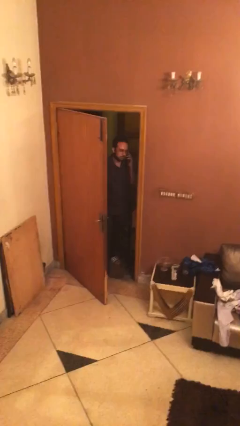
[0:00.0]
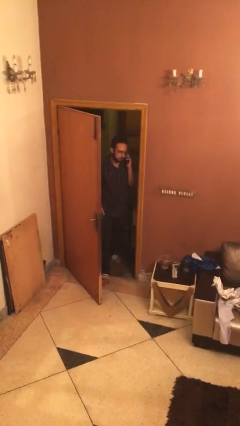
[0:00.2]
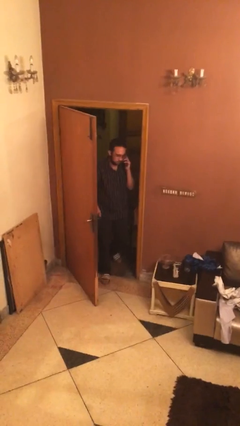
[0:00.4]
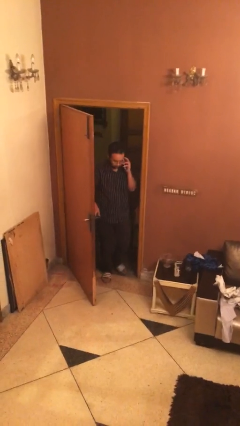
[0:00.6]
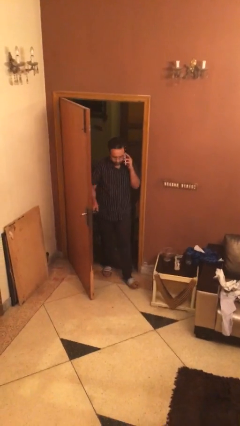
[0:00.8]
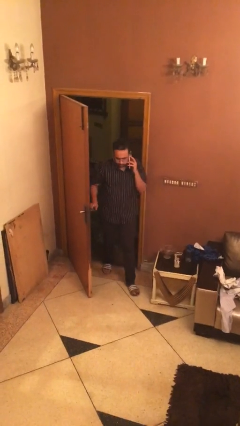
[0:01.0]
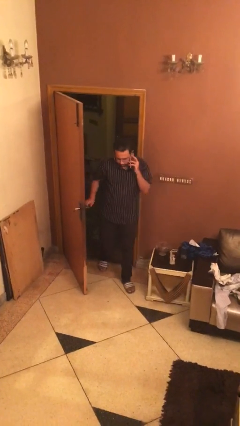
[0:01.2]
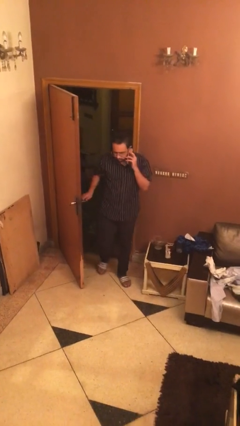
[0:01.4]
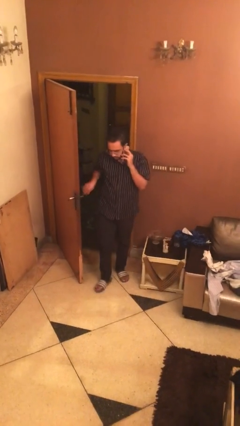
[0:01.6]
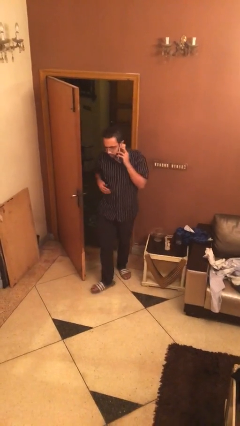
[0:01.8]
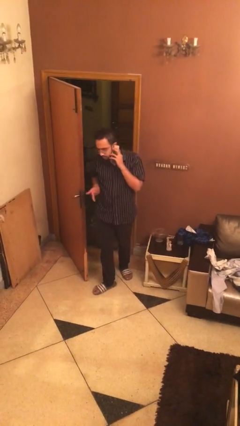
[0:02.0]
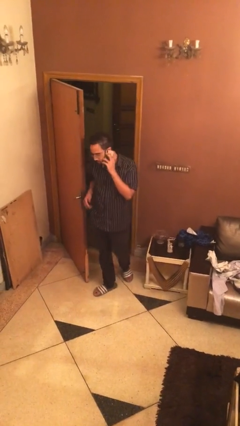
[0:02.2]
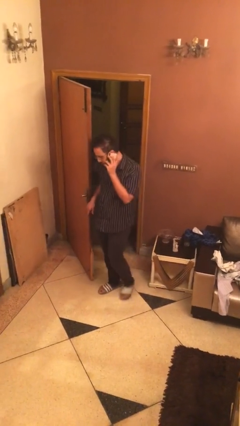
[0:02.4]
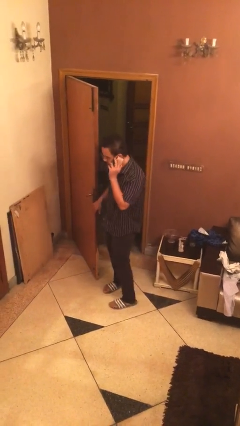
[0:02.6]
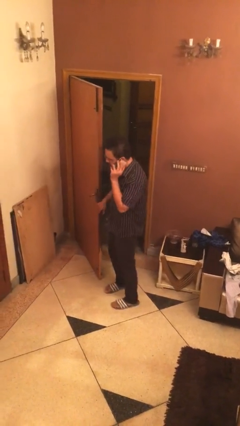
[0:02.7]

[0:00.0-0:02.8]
person enters scene through structure

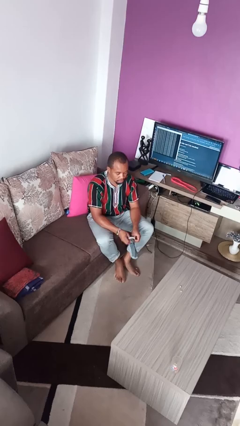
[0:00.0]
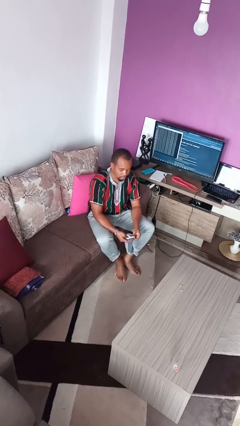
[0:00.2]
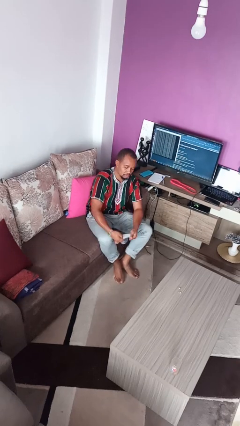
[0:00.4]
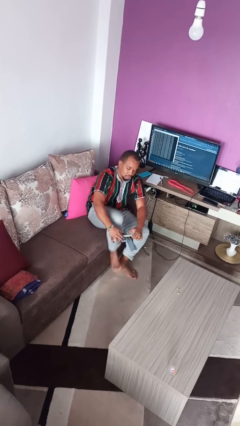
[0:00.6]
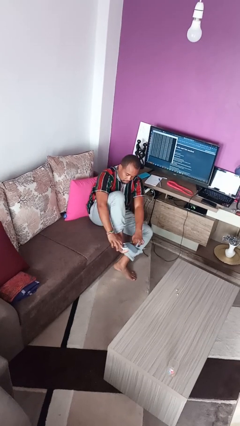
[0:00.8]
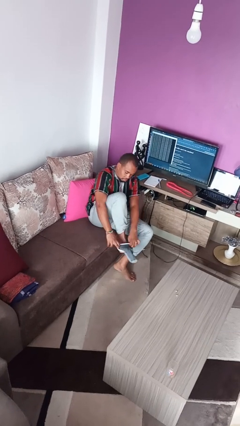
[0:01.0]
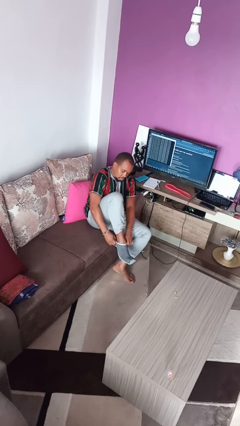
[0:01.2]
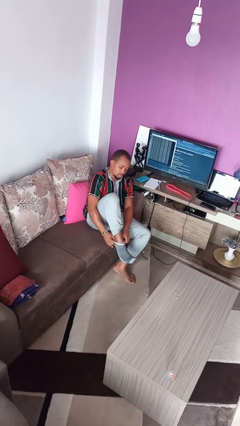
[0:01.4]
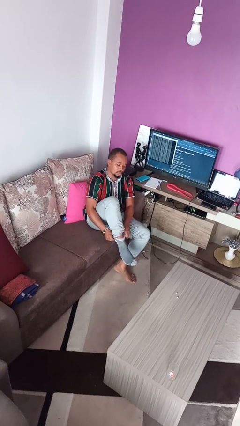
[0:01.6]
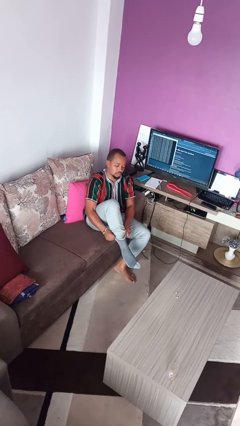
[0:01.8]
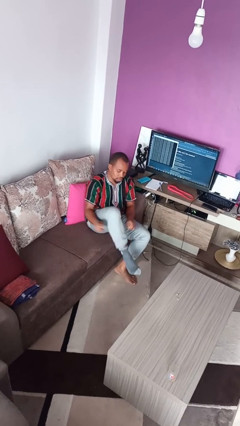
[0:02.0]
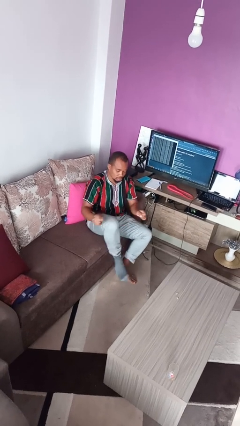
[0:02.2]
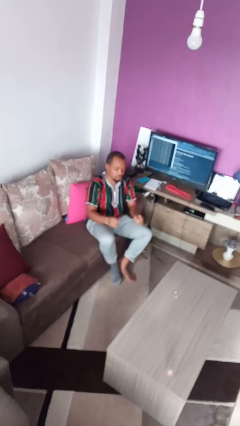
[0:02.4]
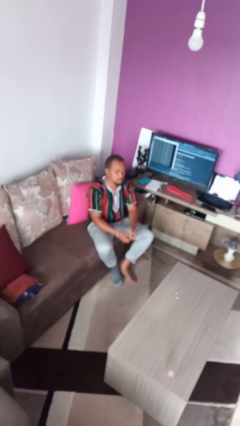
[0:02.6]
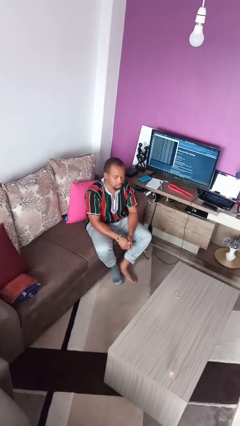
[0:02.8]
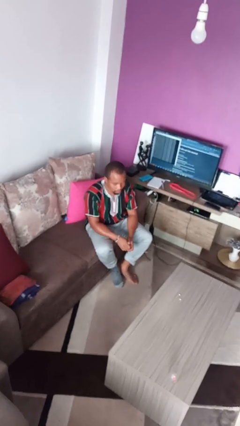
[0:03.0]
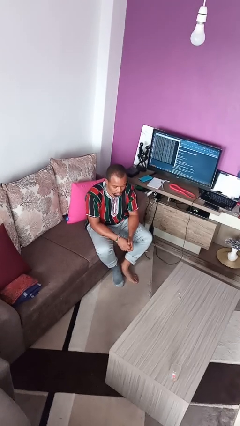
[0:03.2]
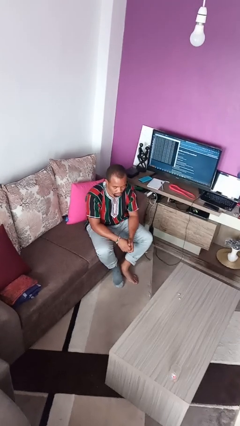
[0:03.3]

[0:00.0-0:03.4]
person puts on socks

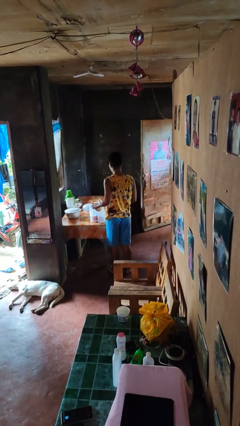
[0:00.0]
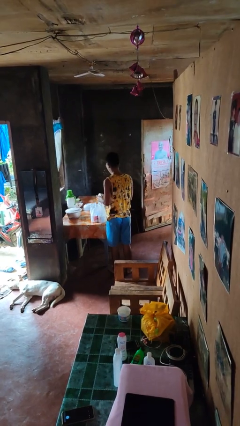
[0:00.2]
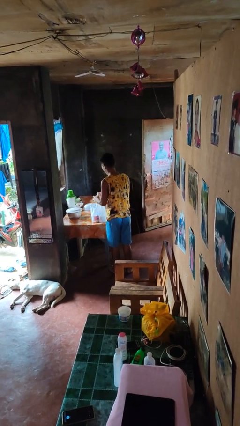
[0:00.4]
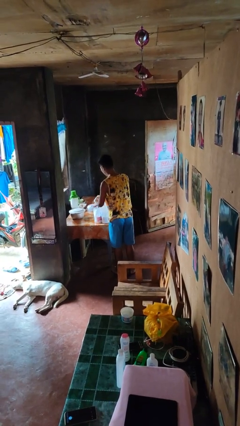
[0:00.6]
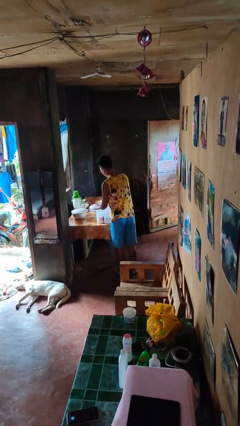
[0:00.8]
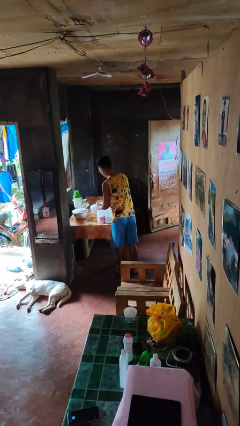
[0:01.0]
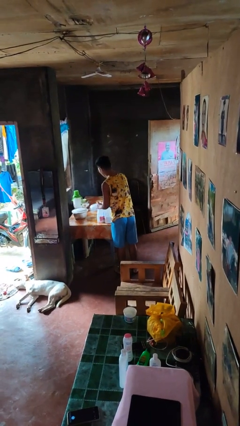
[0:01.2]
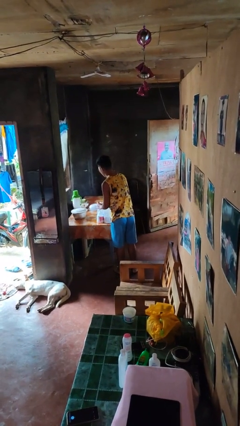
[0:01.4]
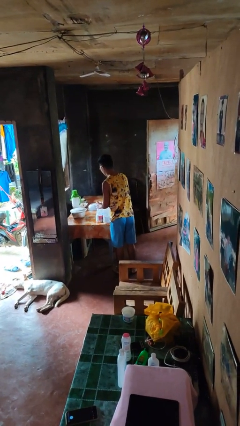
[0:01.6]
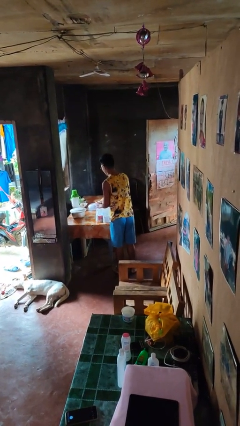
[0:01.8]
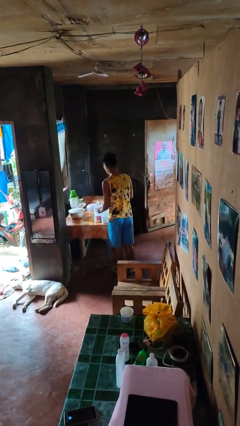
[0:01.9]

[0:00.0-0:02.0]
person puts object into bag

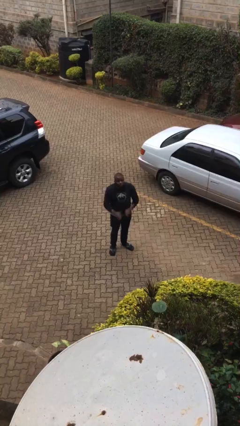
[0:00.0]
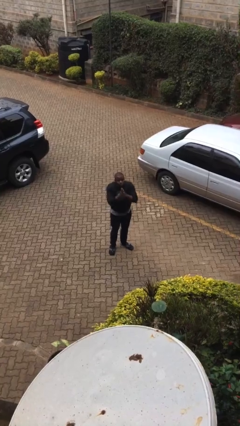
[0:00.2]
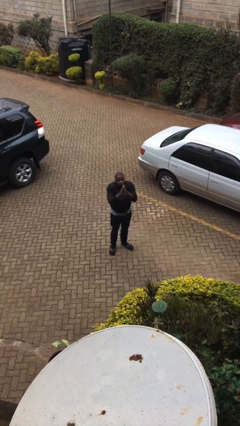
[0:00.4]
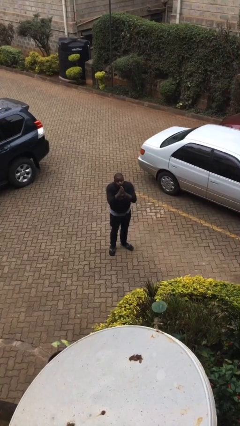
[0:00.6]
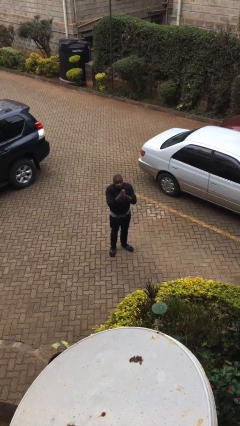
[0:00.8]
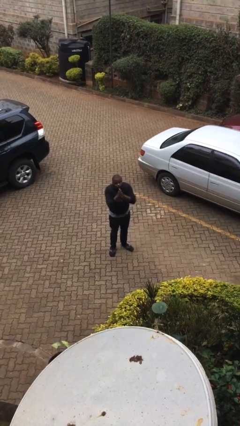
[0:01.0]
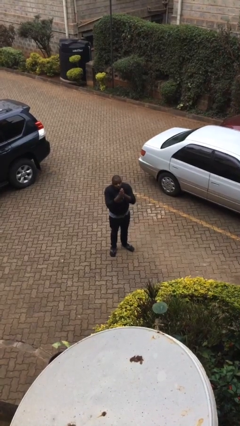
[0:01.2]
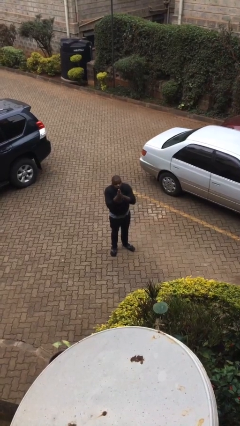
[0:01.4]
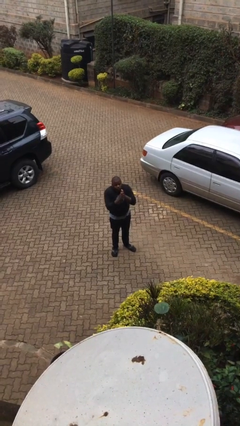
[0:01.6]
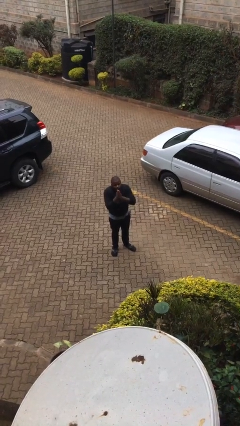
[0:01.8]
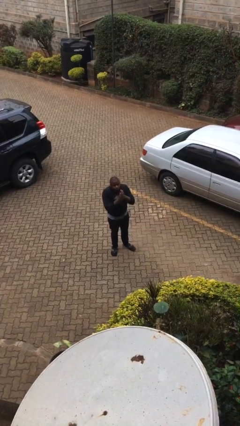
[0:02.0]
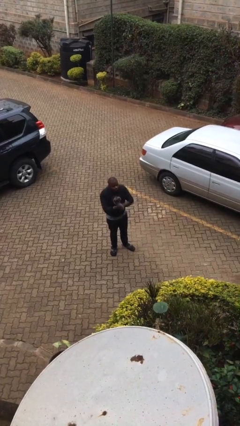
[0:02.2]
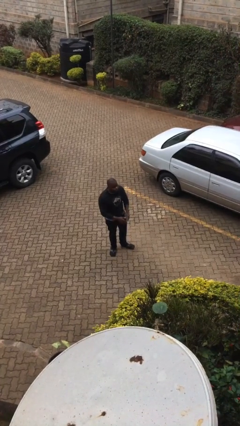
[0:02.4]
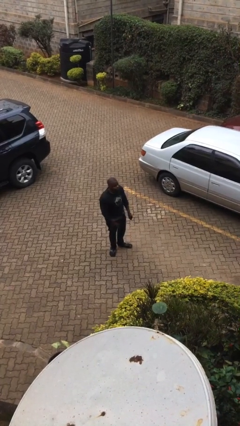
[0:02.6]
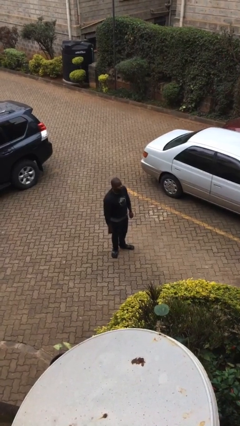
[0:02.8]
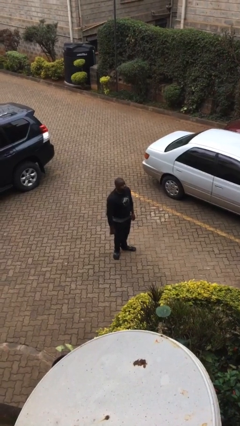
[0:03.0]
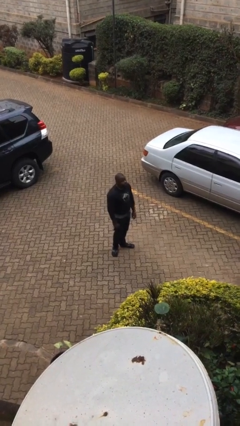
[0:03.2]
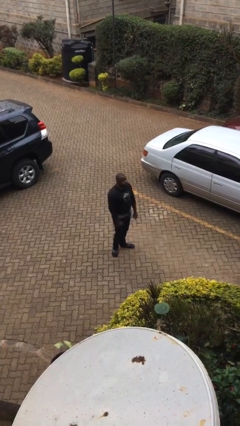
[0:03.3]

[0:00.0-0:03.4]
person blows into hands

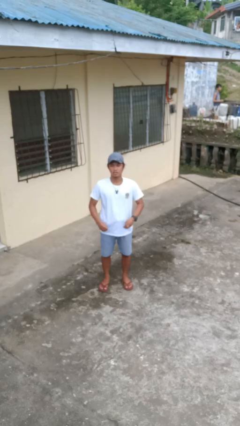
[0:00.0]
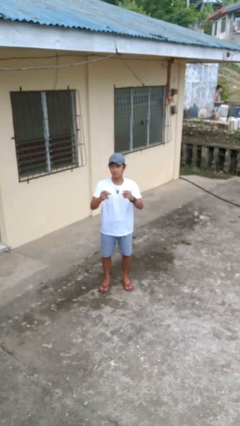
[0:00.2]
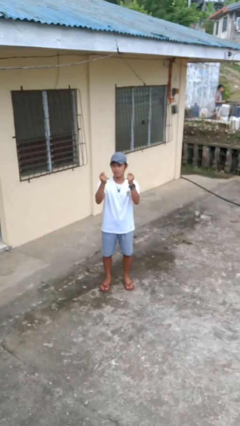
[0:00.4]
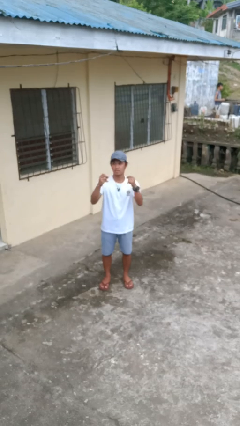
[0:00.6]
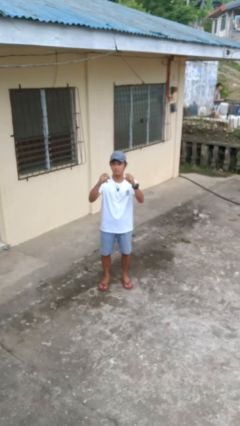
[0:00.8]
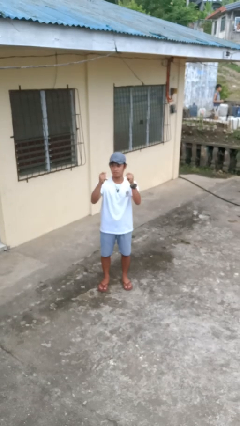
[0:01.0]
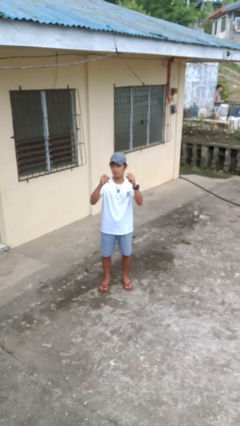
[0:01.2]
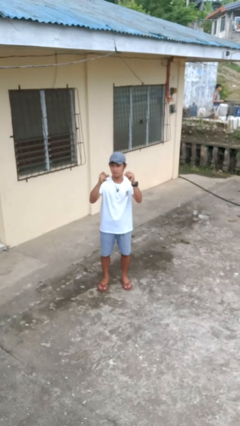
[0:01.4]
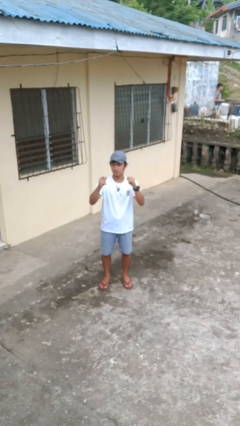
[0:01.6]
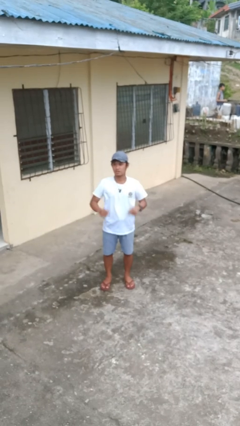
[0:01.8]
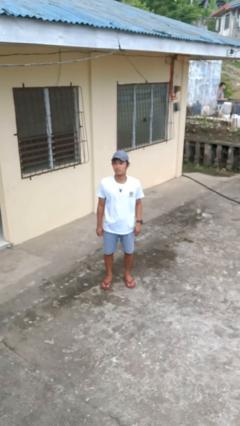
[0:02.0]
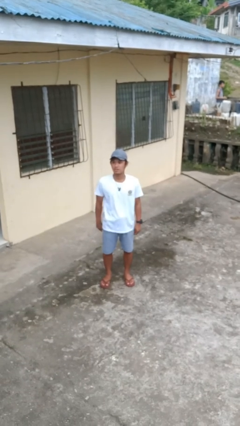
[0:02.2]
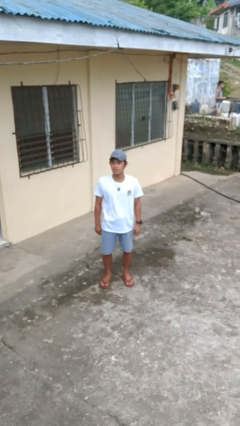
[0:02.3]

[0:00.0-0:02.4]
person snaps fingers

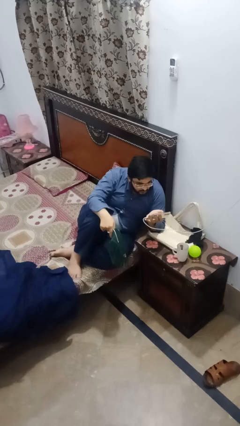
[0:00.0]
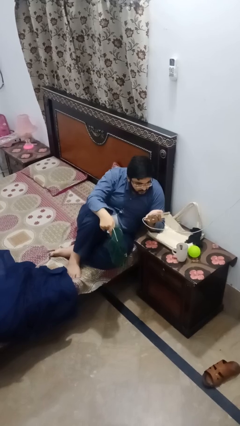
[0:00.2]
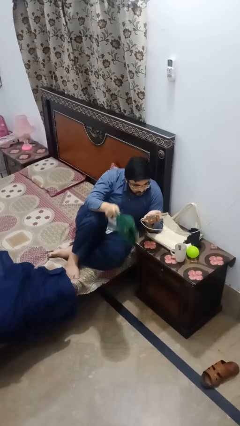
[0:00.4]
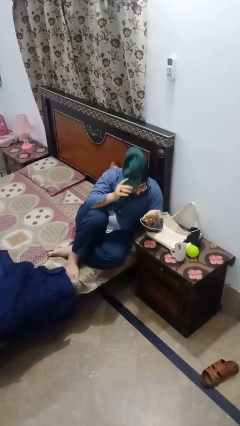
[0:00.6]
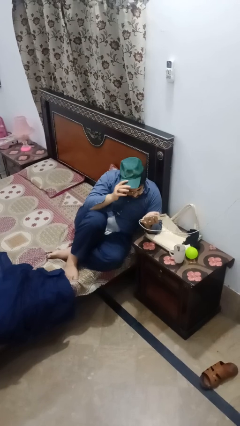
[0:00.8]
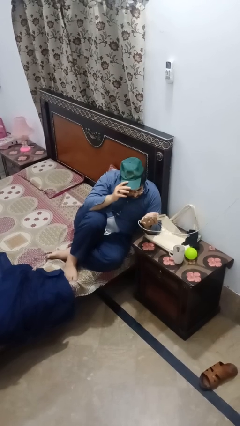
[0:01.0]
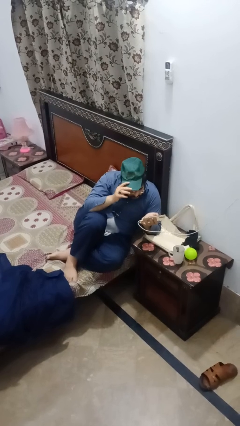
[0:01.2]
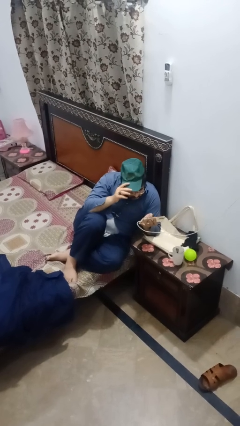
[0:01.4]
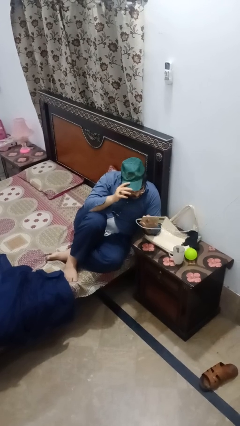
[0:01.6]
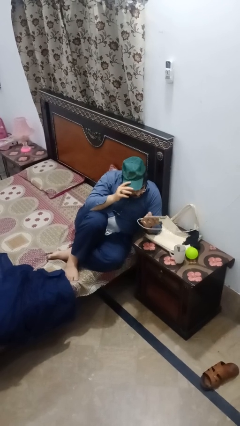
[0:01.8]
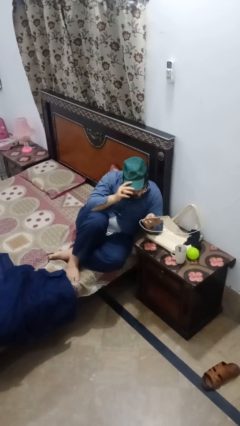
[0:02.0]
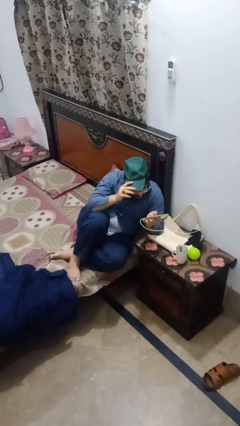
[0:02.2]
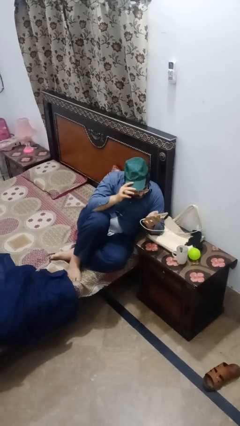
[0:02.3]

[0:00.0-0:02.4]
person puts on hat

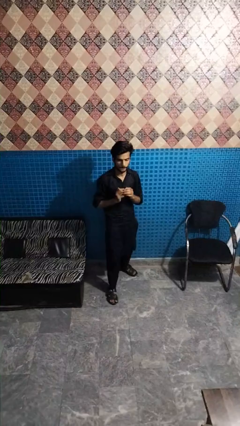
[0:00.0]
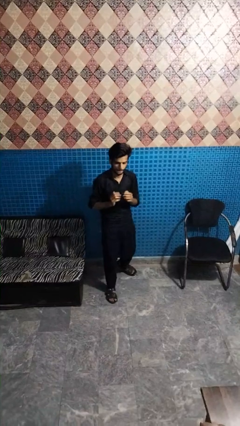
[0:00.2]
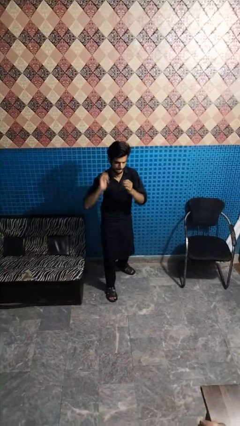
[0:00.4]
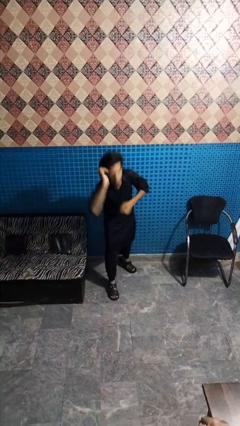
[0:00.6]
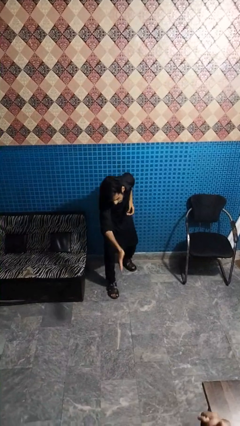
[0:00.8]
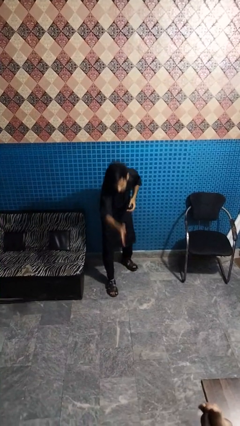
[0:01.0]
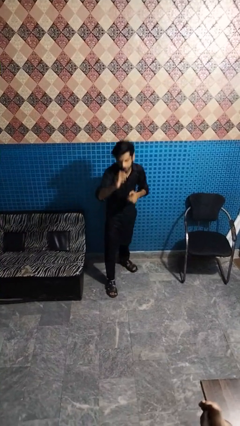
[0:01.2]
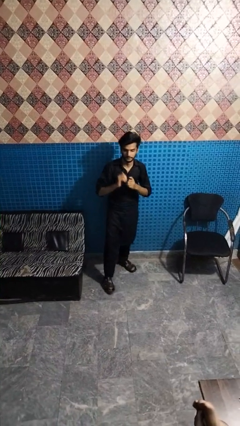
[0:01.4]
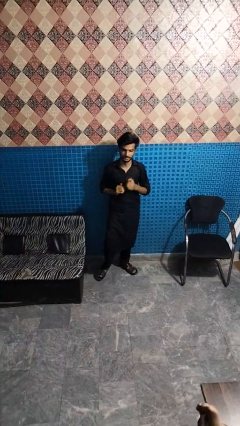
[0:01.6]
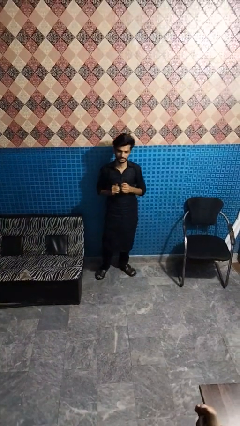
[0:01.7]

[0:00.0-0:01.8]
person karate chop
